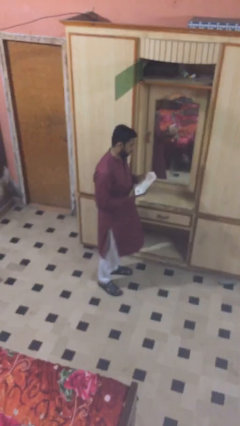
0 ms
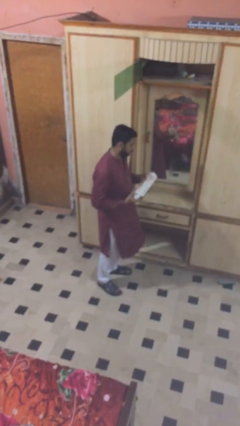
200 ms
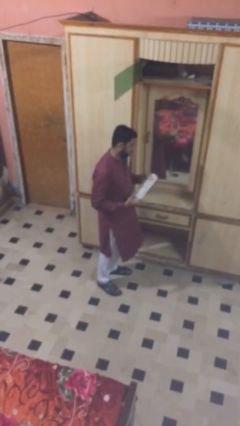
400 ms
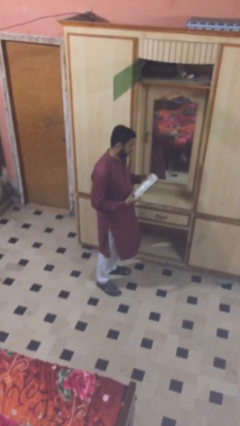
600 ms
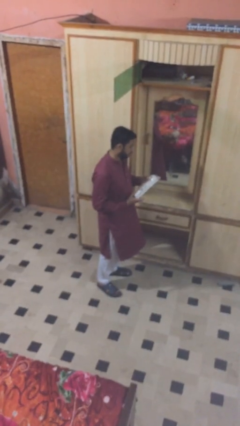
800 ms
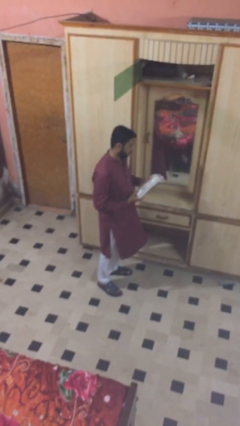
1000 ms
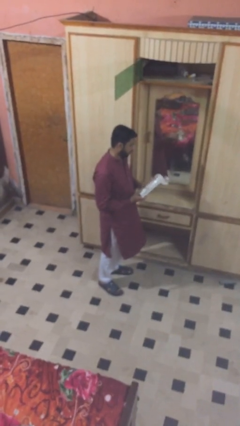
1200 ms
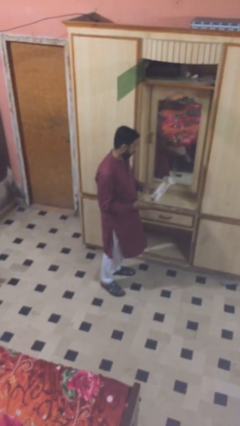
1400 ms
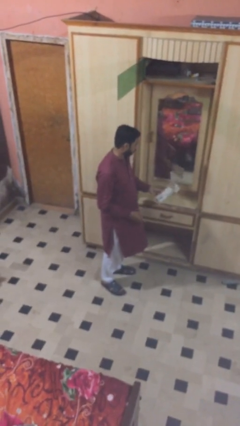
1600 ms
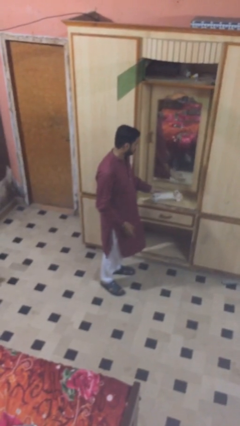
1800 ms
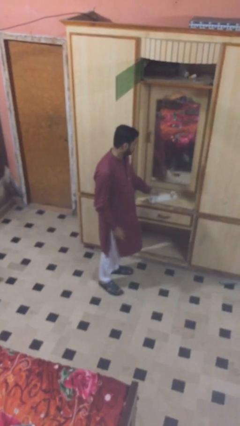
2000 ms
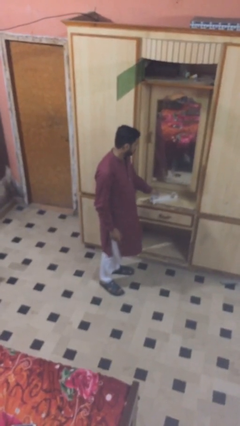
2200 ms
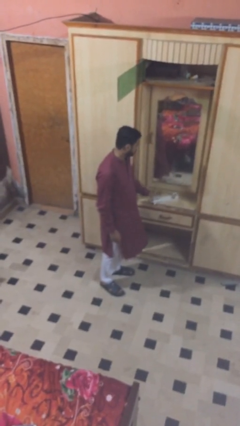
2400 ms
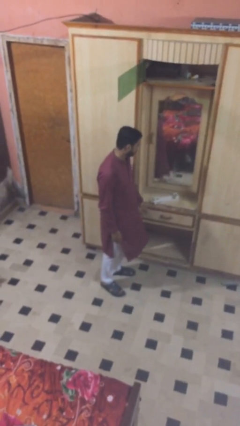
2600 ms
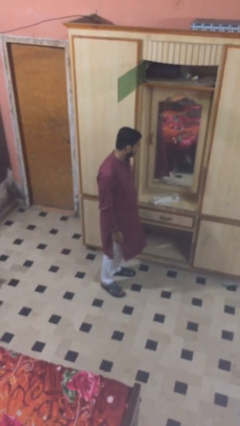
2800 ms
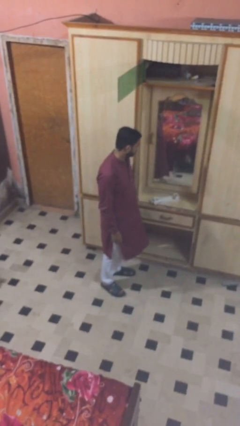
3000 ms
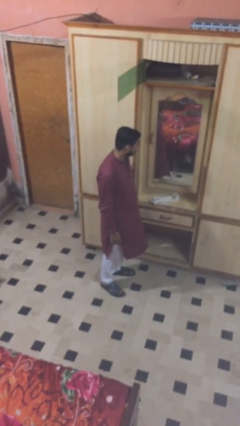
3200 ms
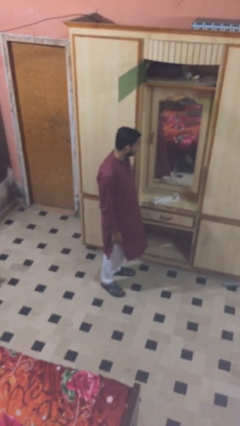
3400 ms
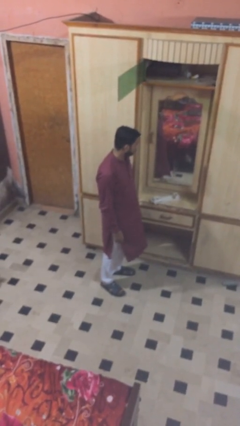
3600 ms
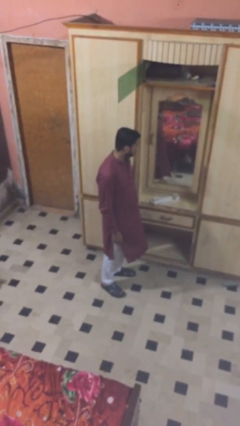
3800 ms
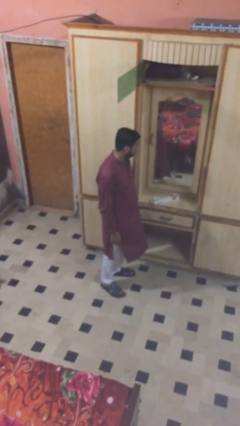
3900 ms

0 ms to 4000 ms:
person puts down object on table

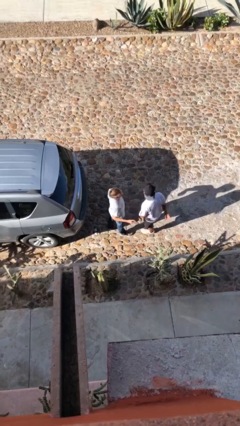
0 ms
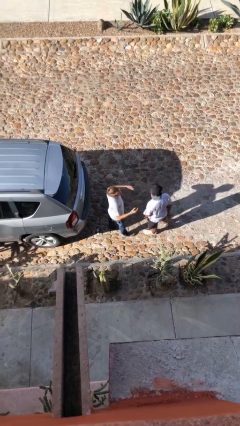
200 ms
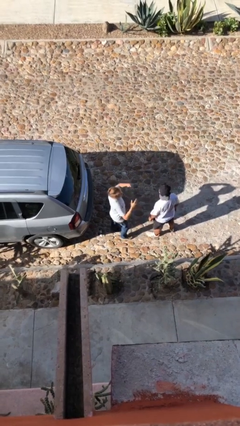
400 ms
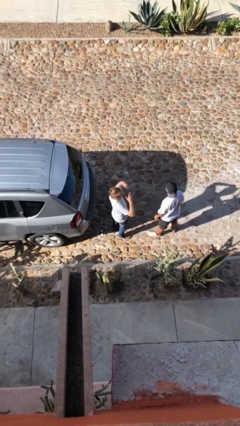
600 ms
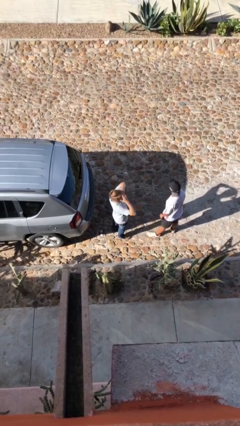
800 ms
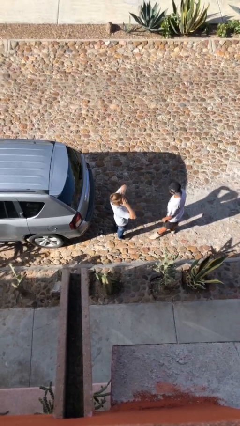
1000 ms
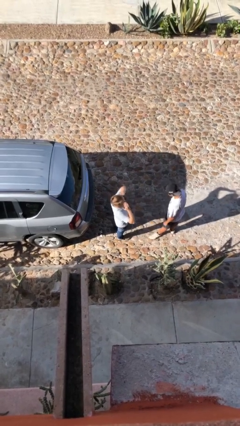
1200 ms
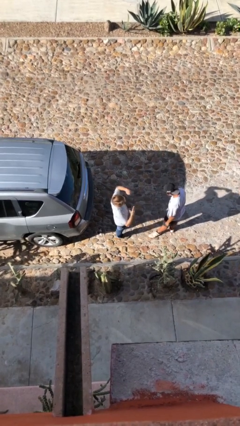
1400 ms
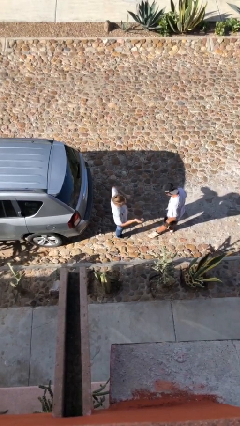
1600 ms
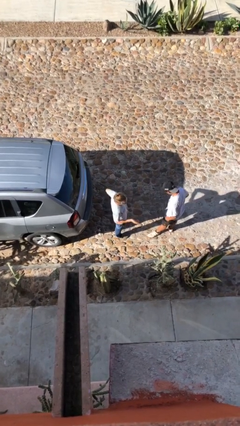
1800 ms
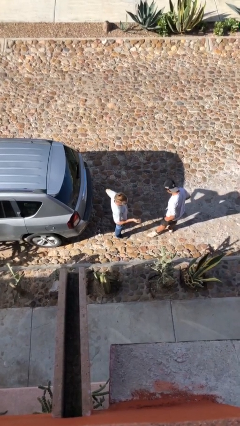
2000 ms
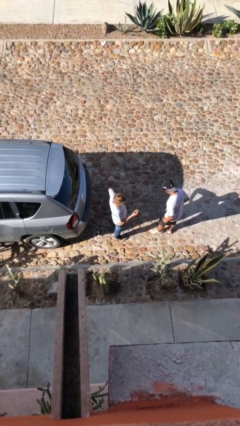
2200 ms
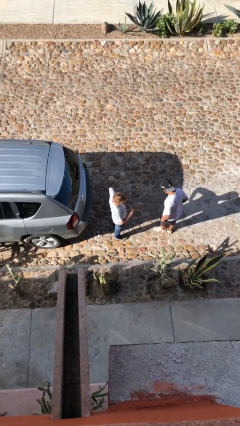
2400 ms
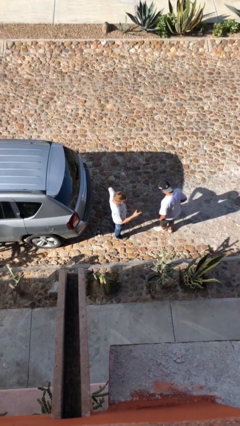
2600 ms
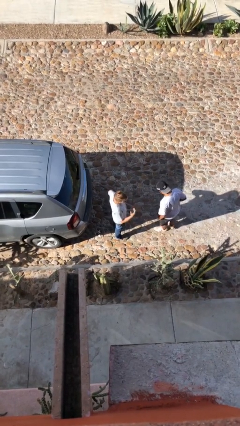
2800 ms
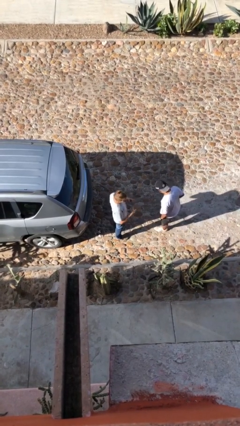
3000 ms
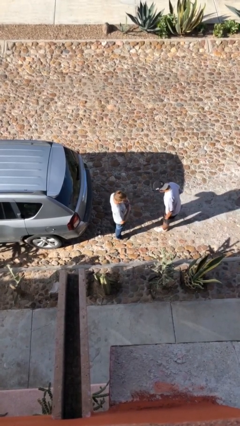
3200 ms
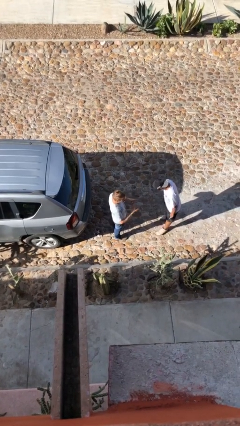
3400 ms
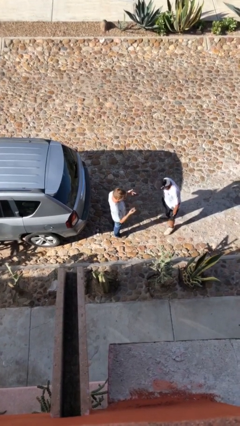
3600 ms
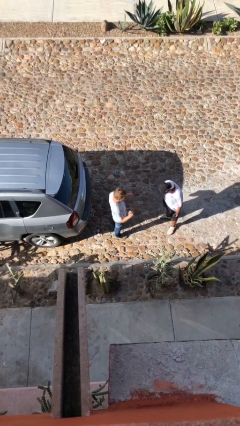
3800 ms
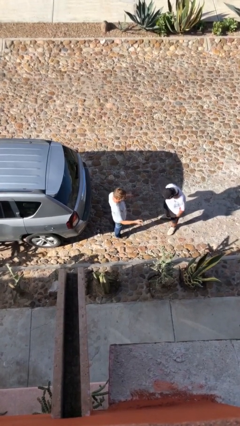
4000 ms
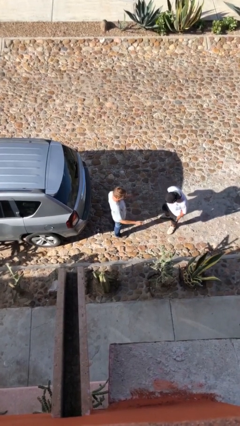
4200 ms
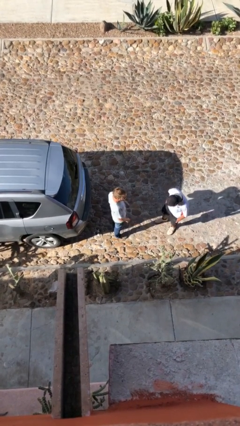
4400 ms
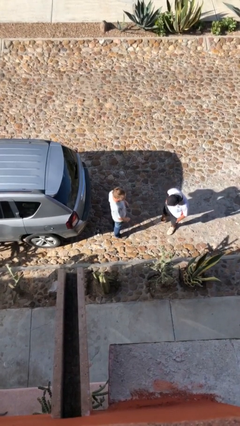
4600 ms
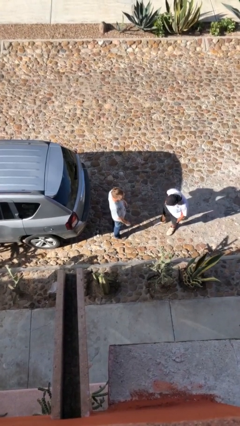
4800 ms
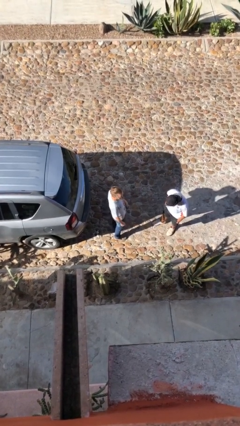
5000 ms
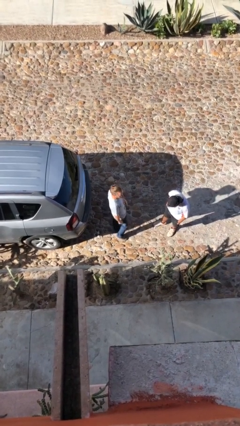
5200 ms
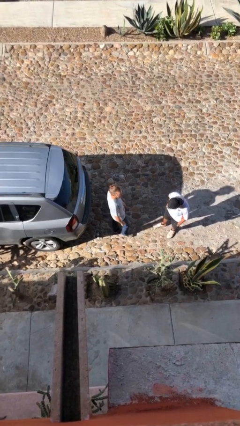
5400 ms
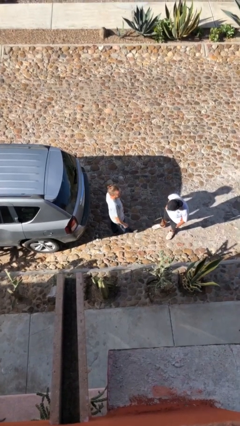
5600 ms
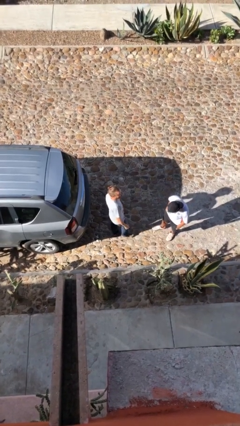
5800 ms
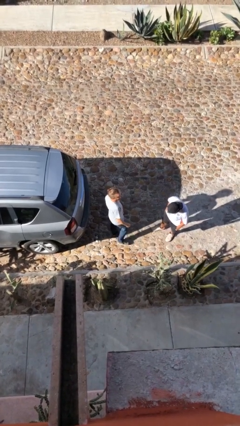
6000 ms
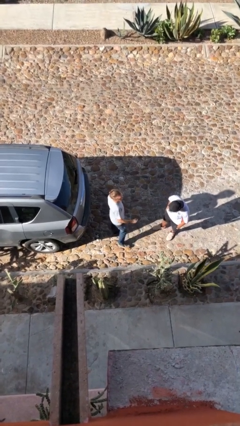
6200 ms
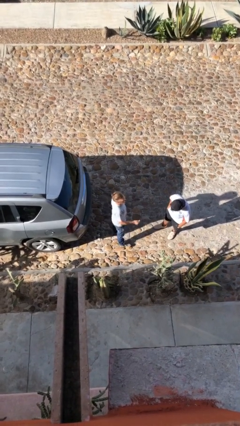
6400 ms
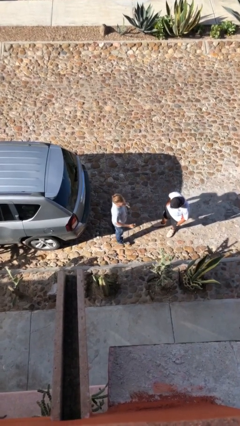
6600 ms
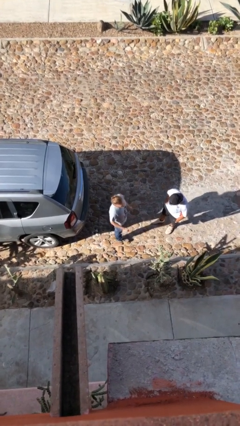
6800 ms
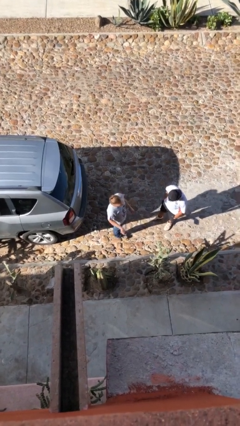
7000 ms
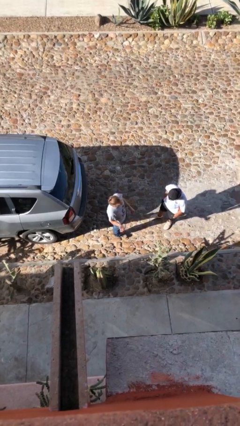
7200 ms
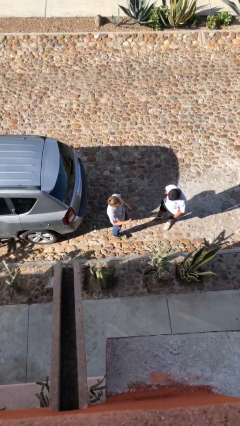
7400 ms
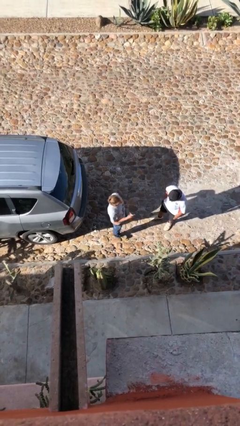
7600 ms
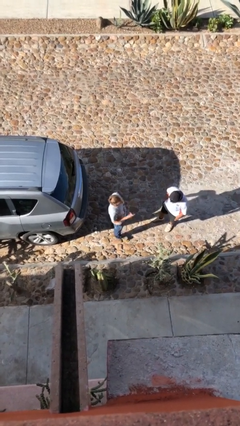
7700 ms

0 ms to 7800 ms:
person talks to person

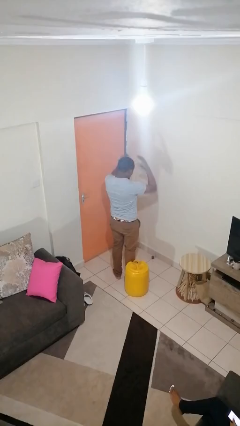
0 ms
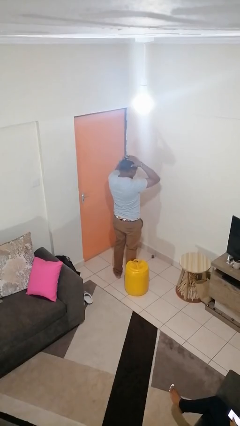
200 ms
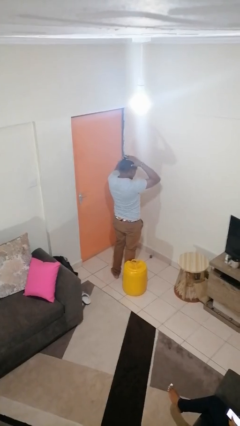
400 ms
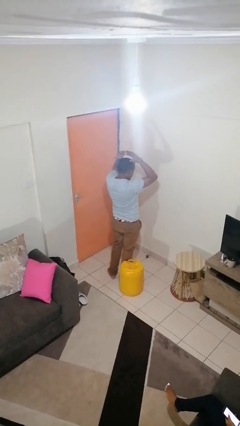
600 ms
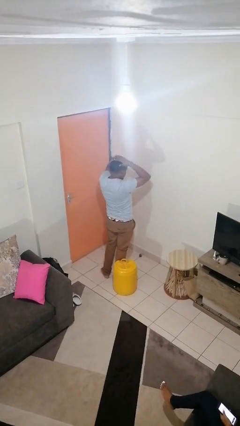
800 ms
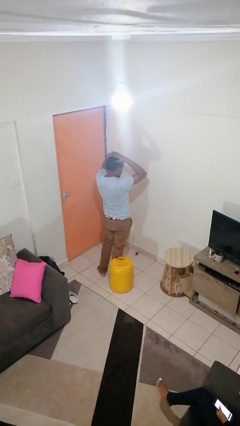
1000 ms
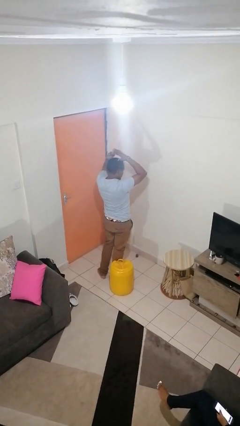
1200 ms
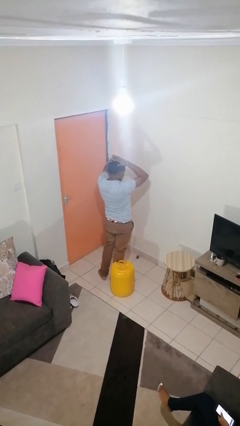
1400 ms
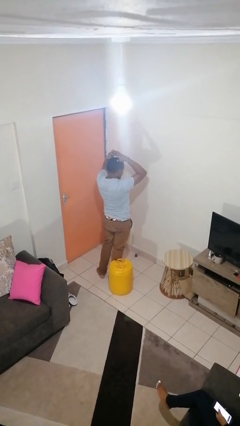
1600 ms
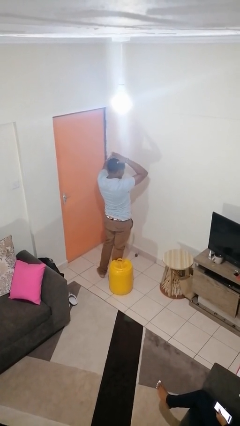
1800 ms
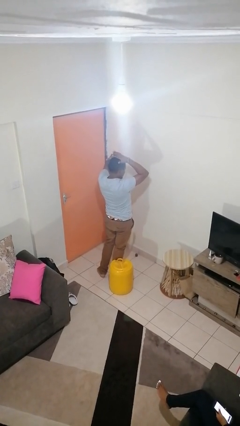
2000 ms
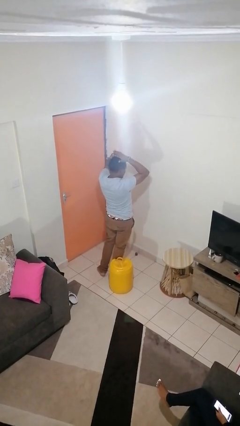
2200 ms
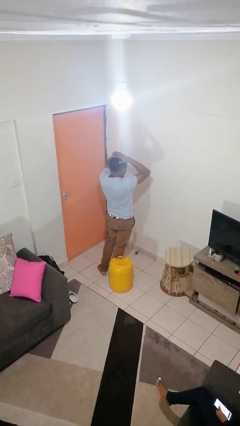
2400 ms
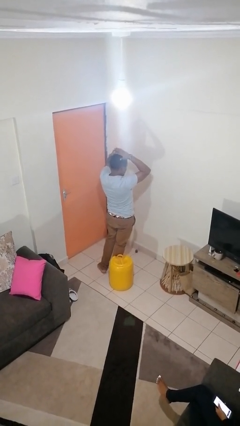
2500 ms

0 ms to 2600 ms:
person pats head

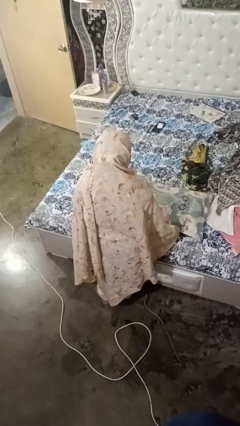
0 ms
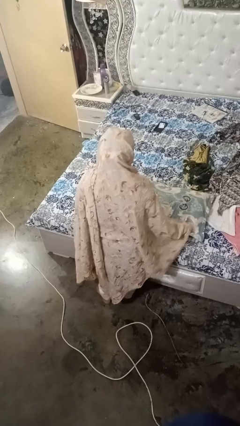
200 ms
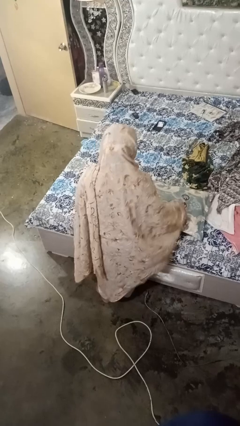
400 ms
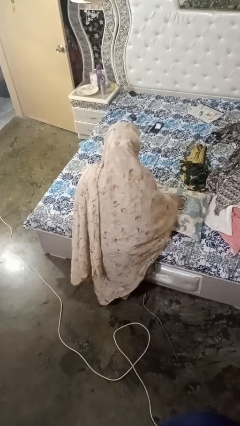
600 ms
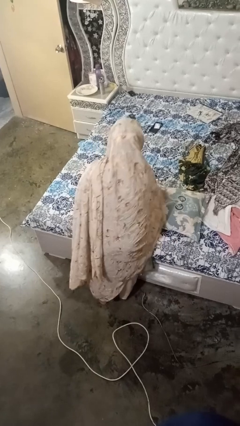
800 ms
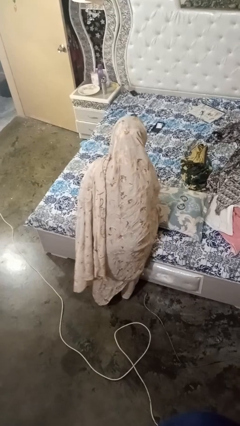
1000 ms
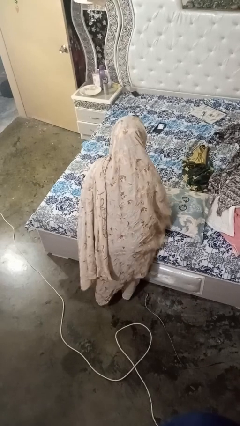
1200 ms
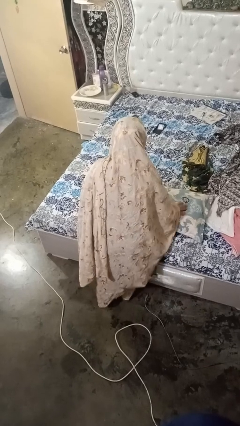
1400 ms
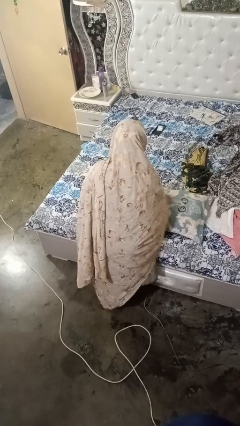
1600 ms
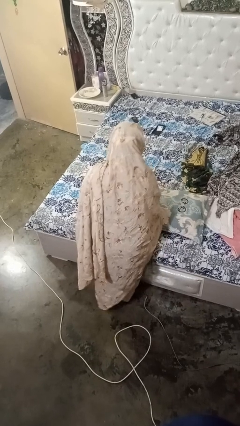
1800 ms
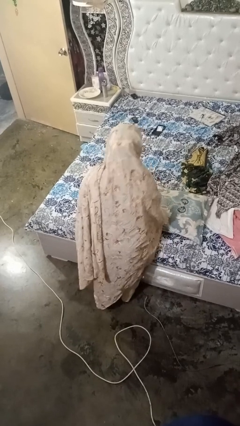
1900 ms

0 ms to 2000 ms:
person waves hand over object

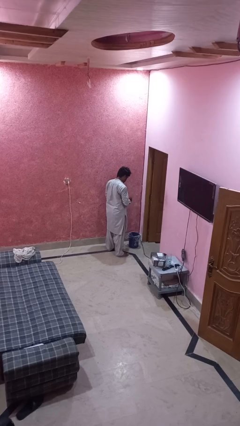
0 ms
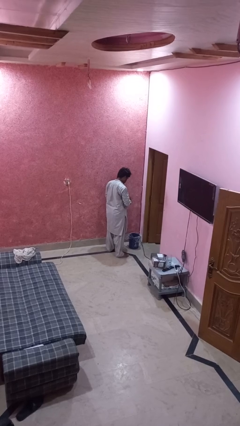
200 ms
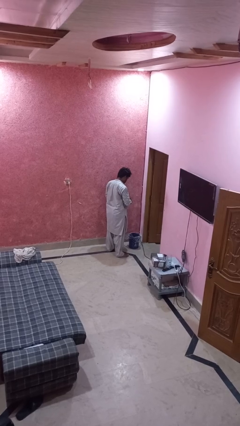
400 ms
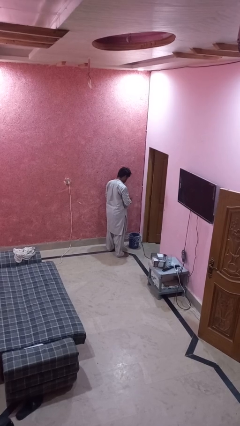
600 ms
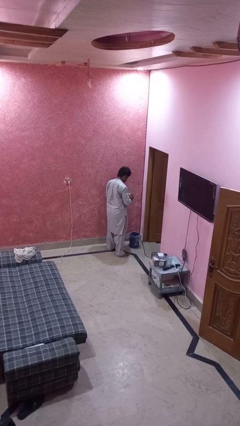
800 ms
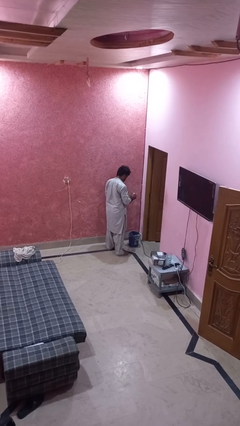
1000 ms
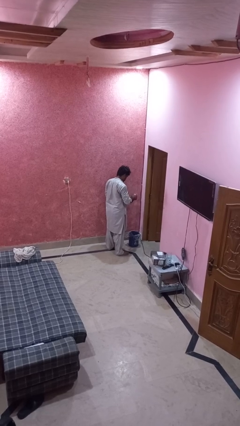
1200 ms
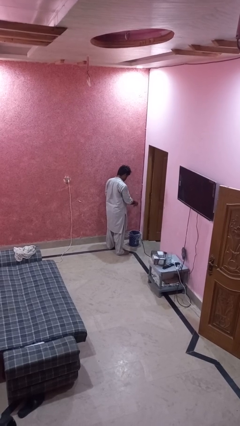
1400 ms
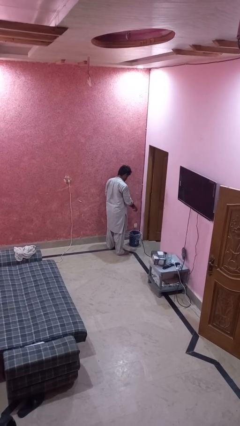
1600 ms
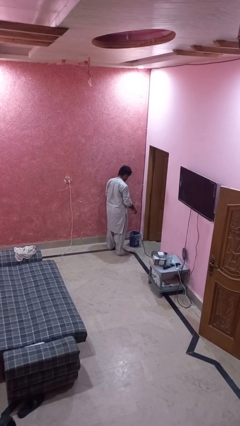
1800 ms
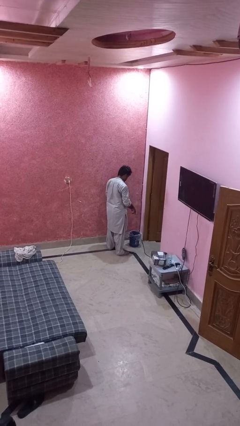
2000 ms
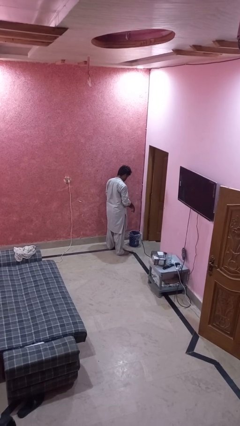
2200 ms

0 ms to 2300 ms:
person discards trash
